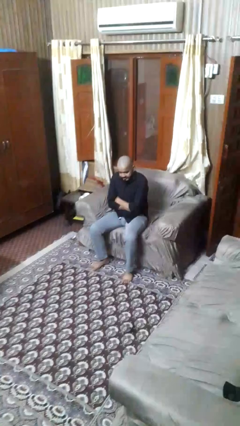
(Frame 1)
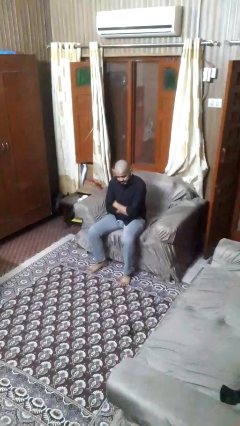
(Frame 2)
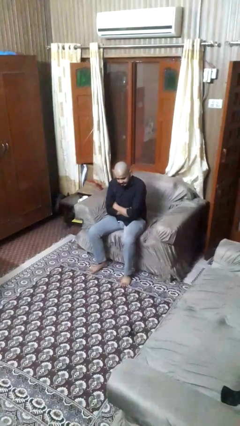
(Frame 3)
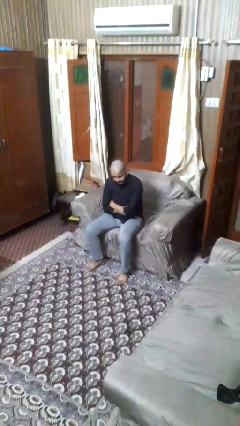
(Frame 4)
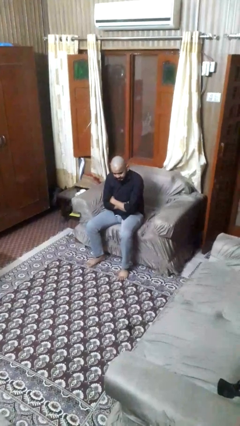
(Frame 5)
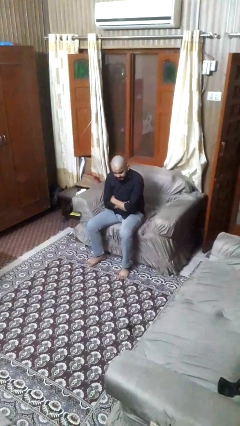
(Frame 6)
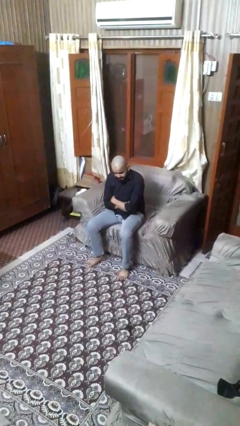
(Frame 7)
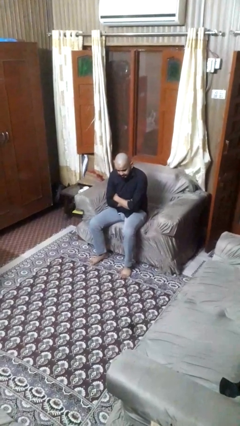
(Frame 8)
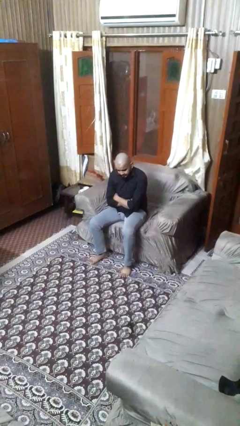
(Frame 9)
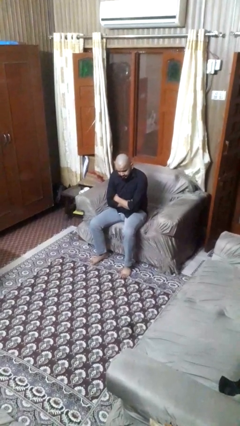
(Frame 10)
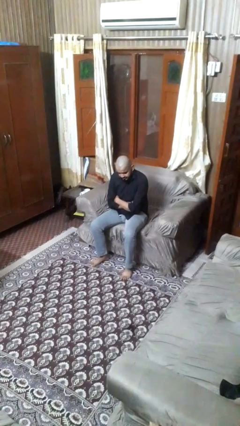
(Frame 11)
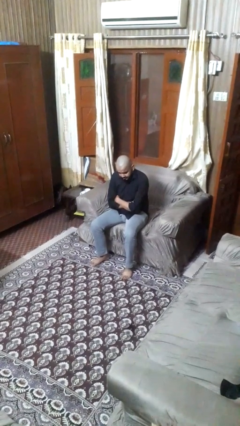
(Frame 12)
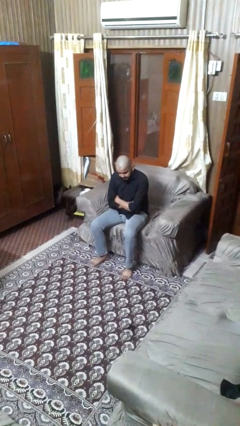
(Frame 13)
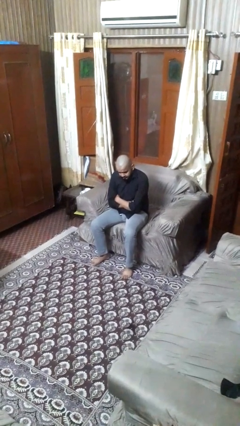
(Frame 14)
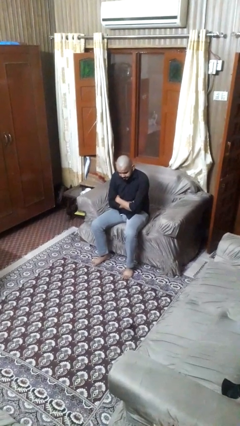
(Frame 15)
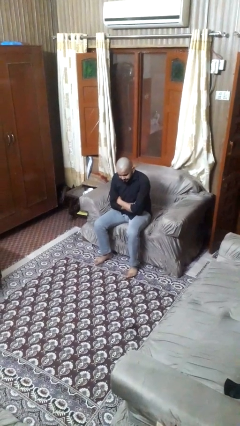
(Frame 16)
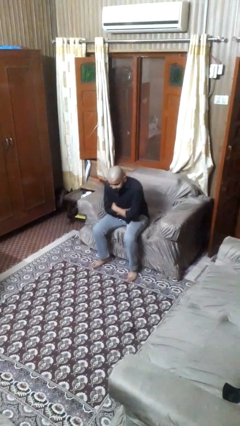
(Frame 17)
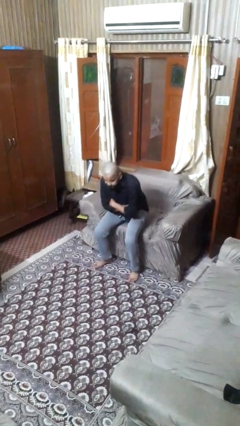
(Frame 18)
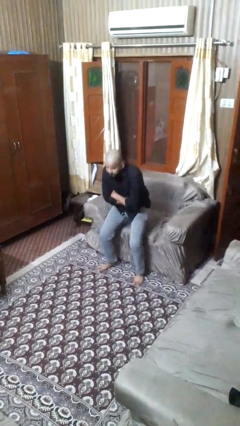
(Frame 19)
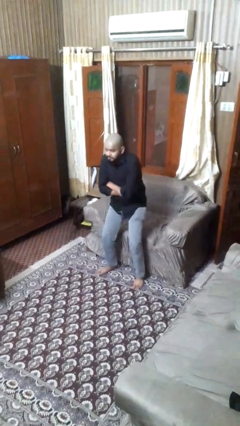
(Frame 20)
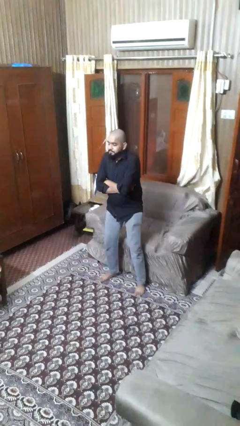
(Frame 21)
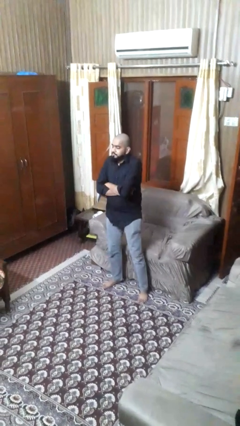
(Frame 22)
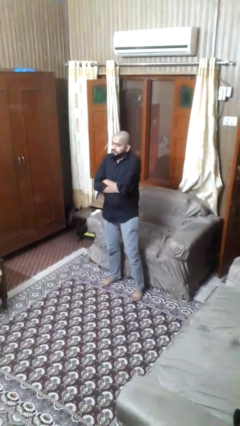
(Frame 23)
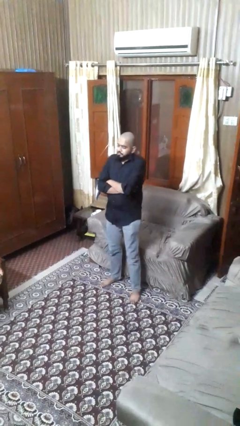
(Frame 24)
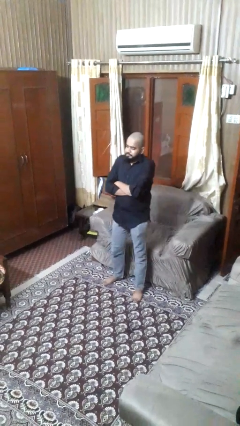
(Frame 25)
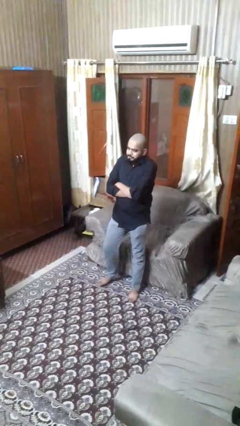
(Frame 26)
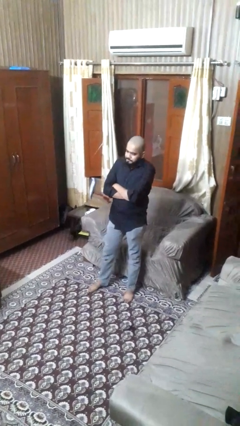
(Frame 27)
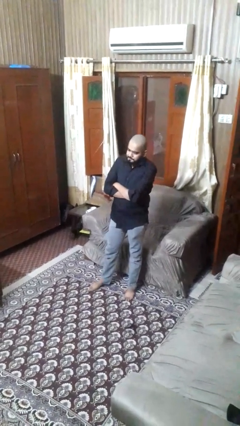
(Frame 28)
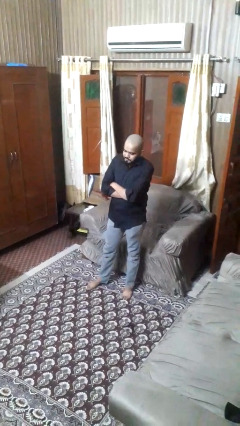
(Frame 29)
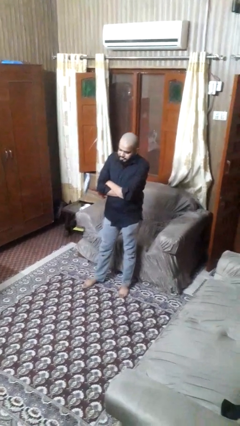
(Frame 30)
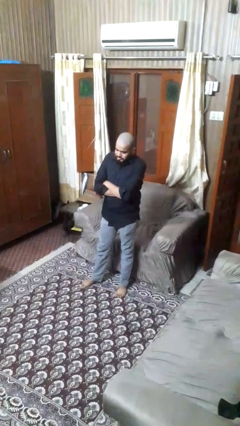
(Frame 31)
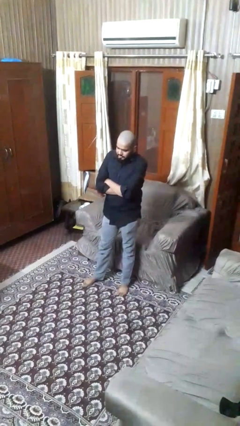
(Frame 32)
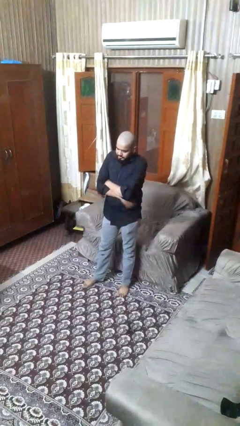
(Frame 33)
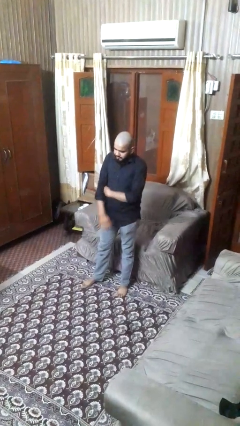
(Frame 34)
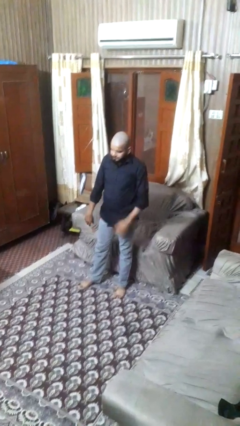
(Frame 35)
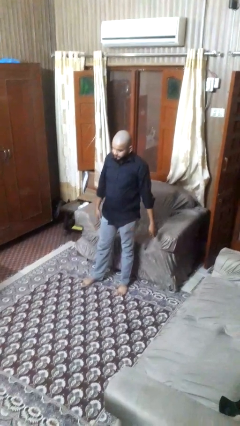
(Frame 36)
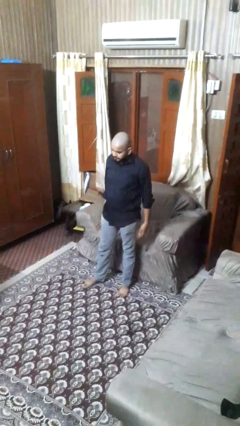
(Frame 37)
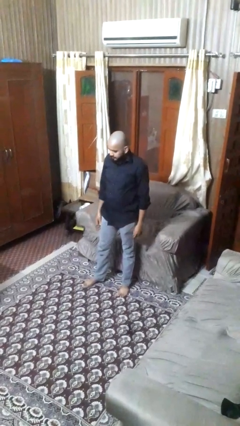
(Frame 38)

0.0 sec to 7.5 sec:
person crosses arms

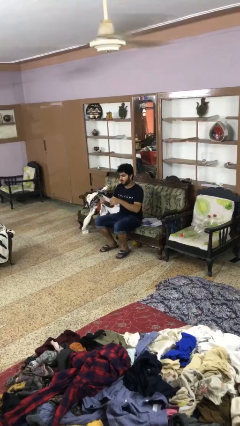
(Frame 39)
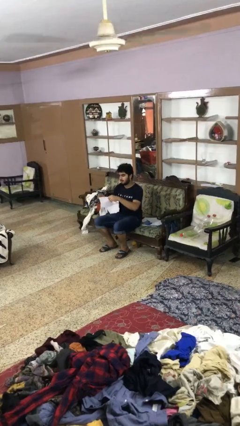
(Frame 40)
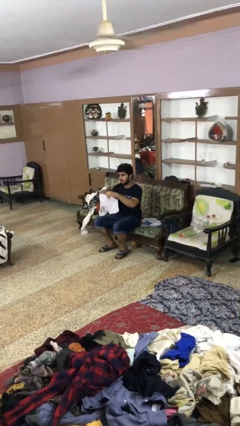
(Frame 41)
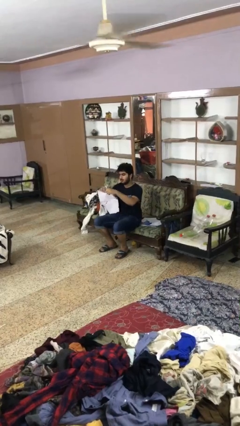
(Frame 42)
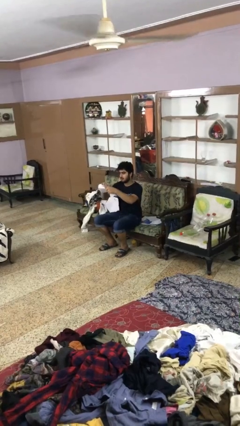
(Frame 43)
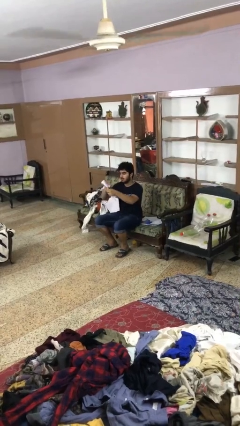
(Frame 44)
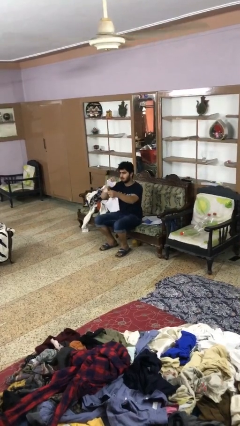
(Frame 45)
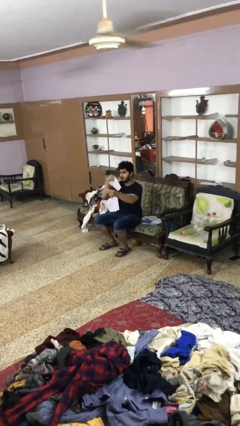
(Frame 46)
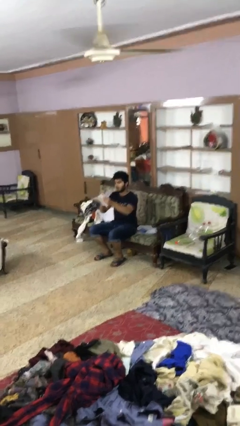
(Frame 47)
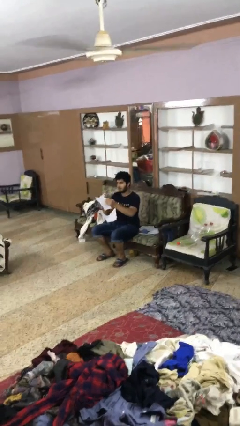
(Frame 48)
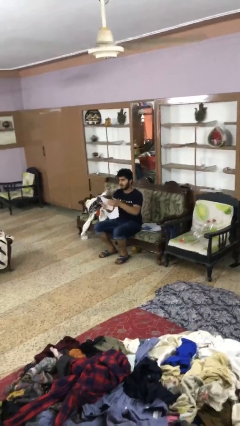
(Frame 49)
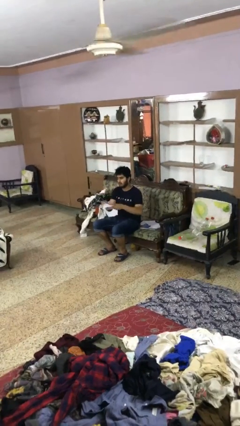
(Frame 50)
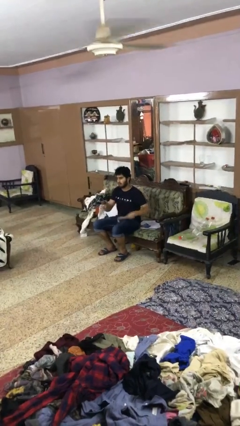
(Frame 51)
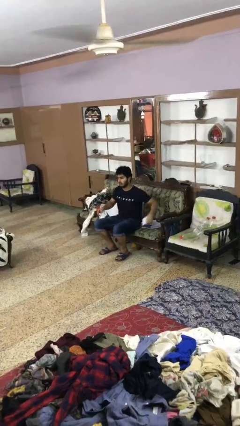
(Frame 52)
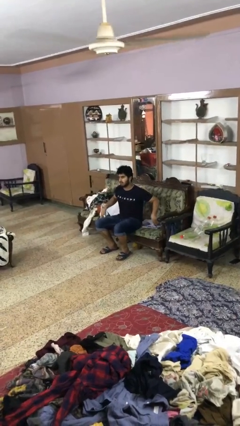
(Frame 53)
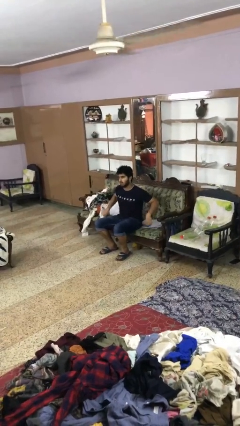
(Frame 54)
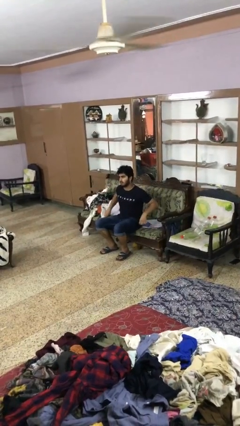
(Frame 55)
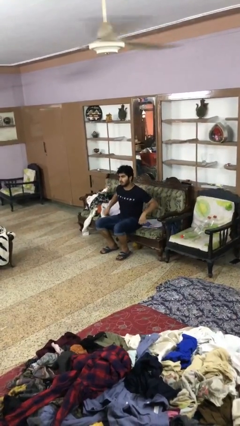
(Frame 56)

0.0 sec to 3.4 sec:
person tears paper

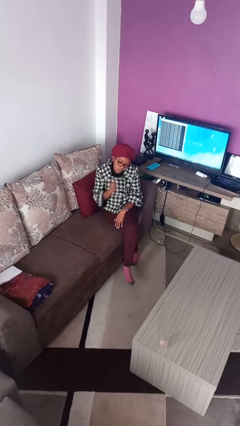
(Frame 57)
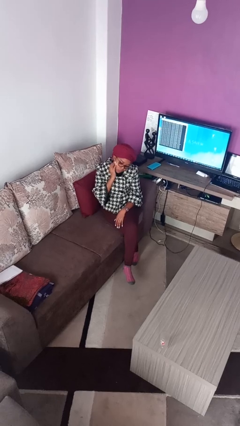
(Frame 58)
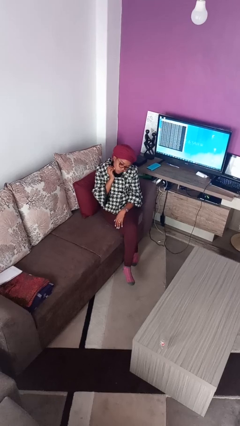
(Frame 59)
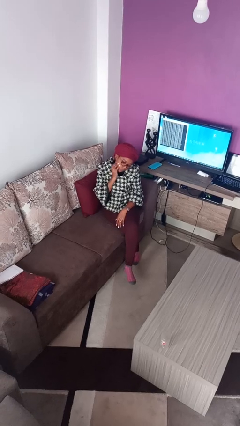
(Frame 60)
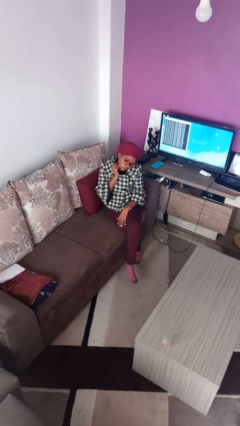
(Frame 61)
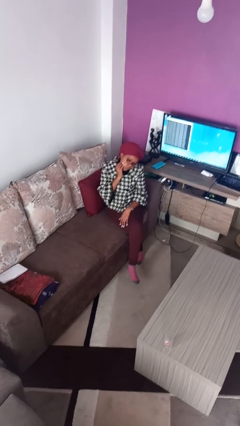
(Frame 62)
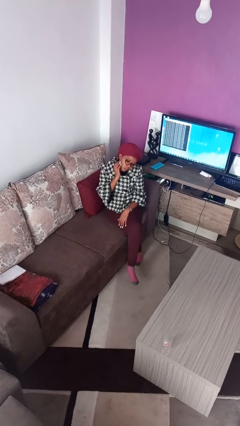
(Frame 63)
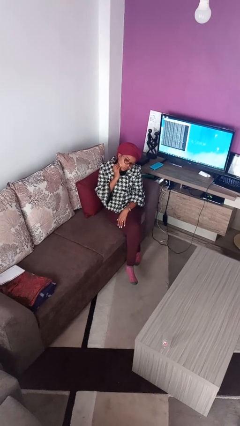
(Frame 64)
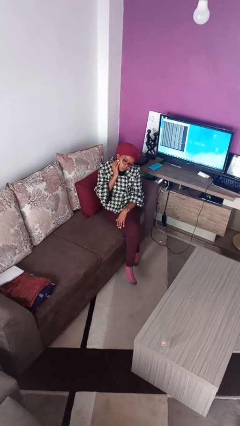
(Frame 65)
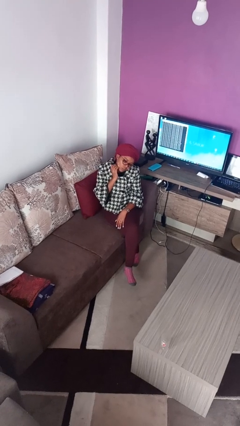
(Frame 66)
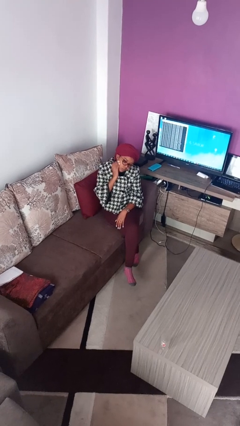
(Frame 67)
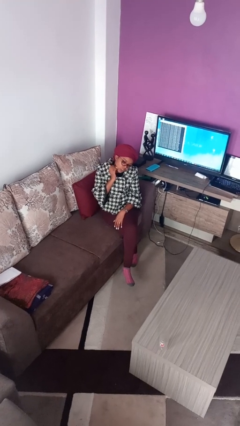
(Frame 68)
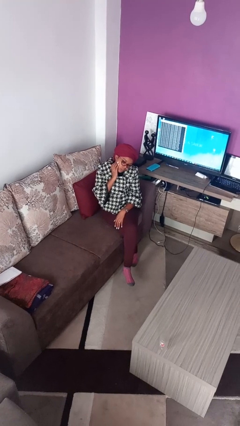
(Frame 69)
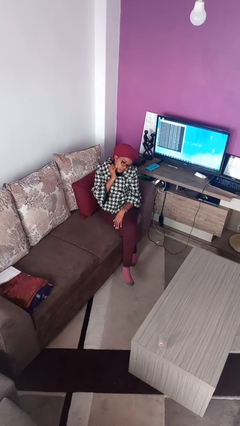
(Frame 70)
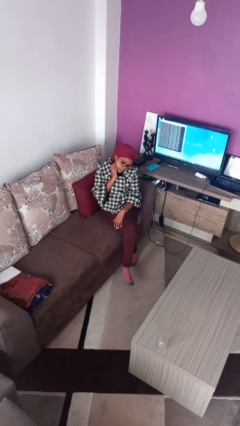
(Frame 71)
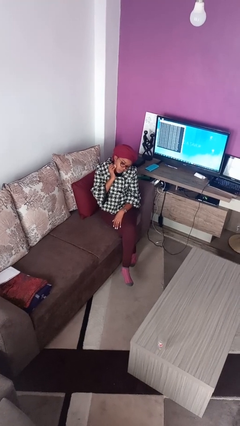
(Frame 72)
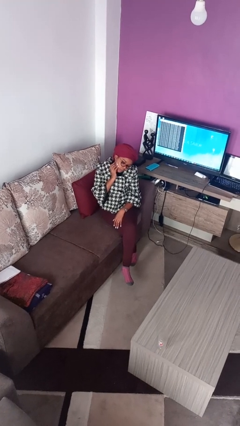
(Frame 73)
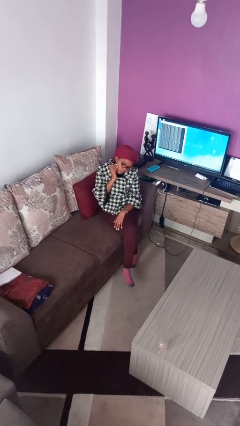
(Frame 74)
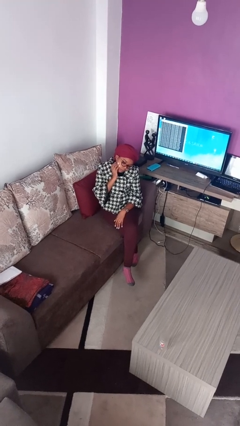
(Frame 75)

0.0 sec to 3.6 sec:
person scratches face

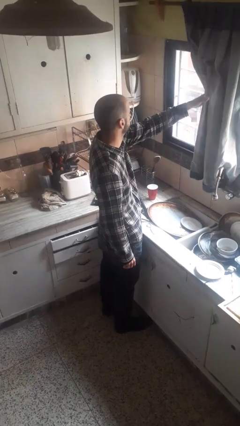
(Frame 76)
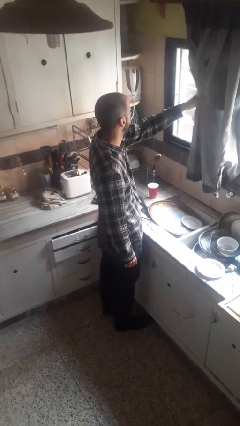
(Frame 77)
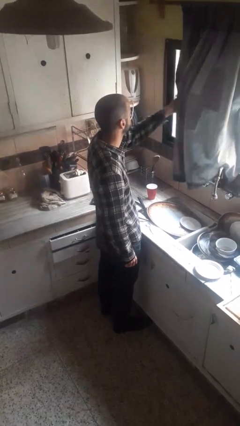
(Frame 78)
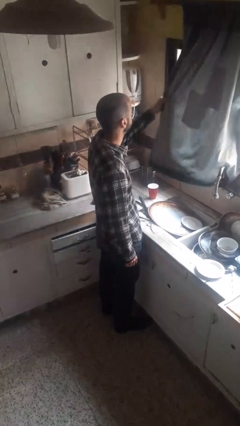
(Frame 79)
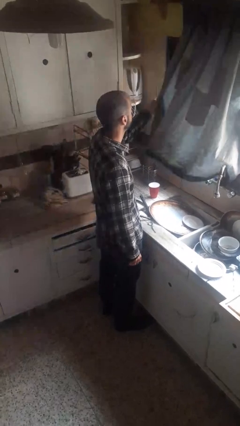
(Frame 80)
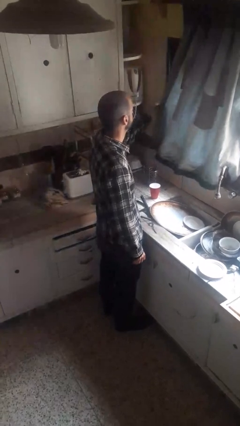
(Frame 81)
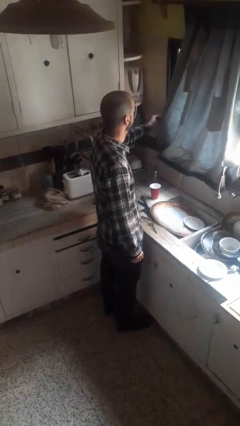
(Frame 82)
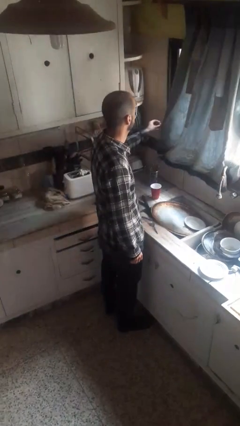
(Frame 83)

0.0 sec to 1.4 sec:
person closes curtains

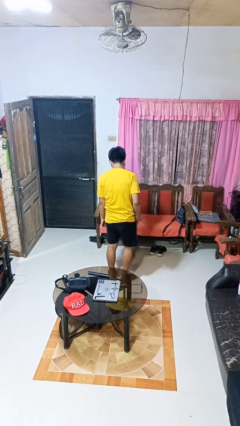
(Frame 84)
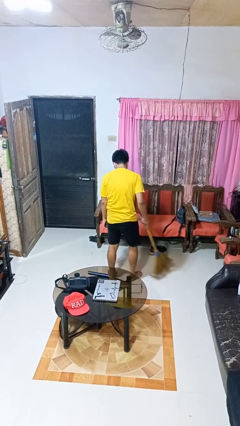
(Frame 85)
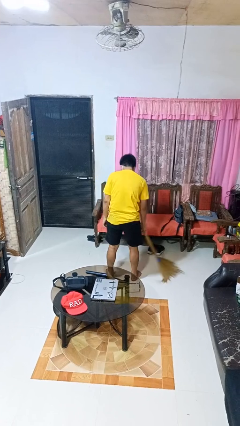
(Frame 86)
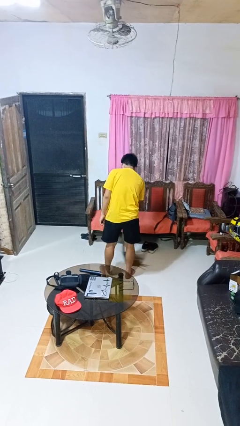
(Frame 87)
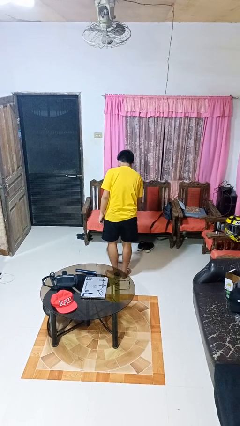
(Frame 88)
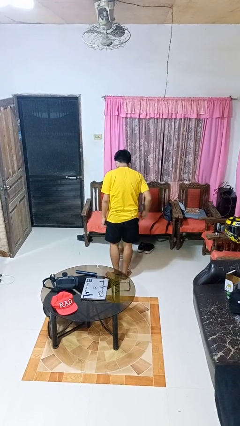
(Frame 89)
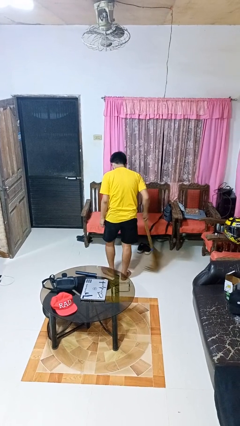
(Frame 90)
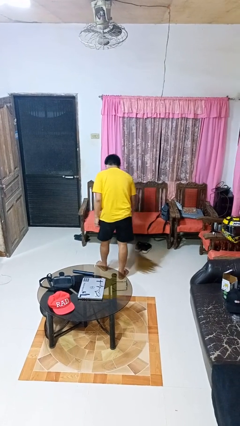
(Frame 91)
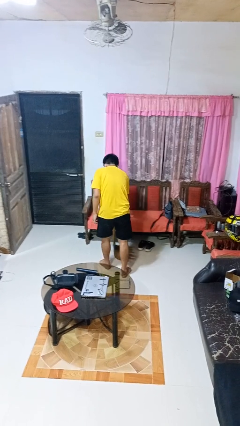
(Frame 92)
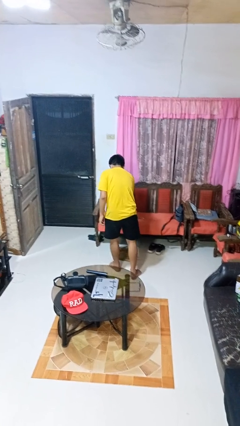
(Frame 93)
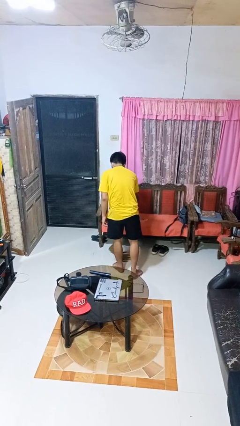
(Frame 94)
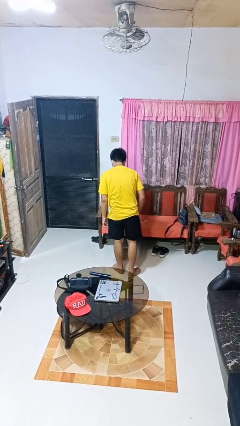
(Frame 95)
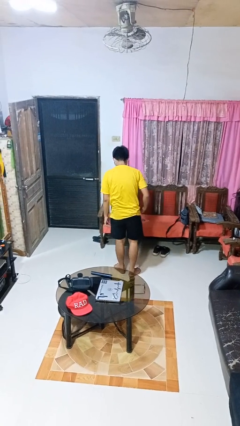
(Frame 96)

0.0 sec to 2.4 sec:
person sweeps floor
